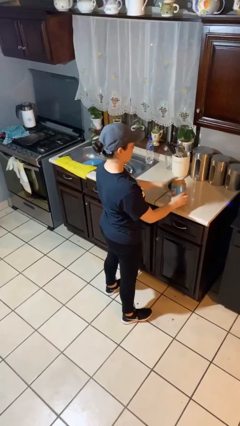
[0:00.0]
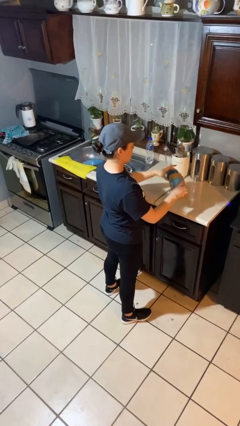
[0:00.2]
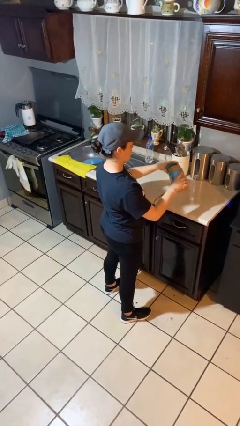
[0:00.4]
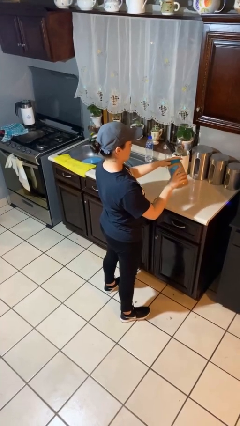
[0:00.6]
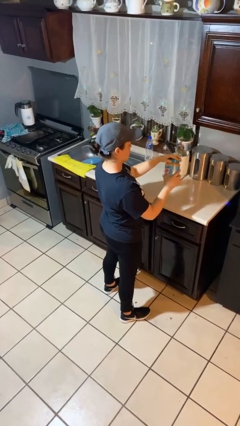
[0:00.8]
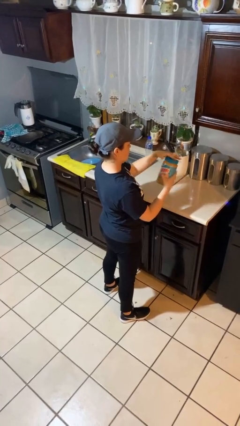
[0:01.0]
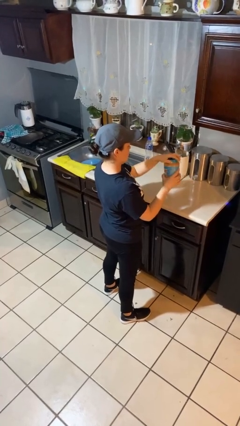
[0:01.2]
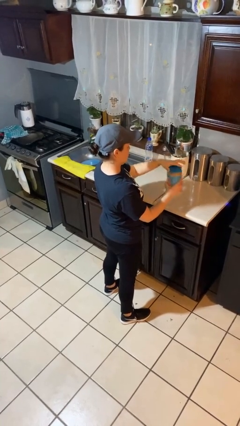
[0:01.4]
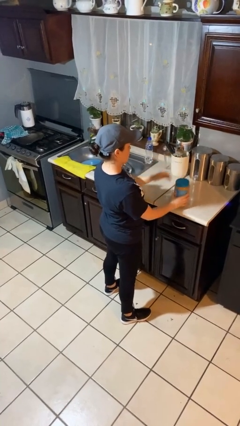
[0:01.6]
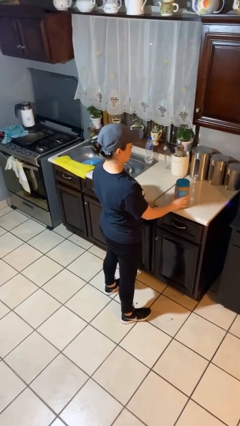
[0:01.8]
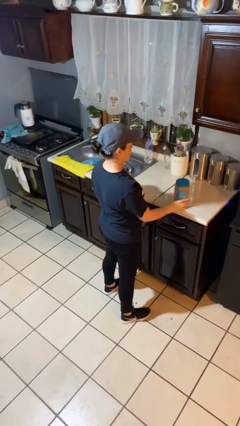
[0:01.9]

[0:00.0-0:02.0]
person closes jar

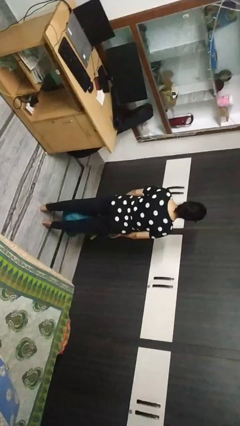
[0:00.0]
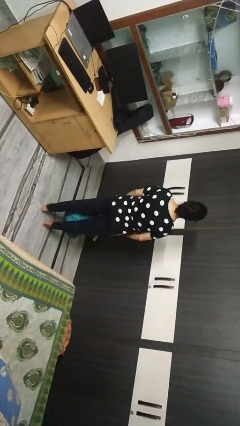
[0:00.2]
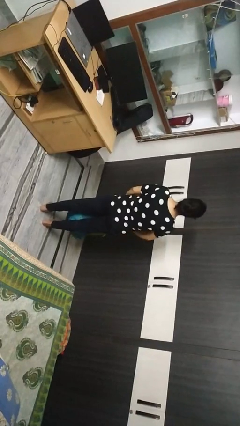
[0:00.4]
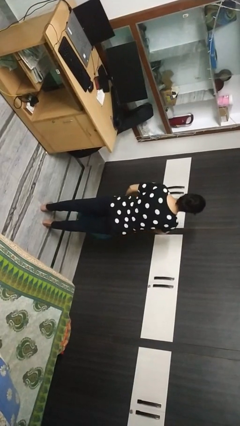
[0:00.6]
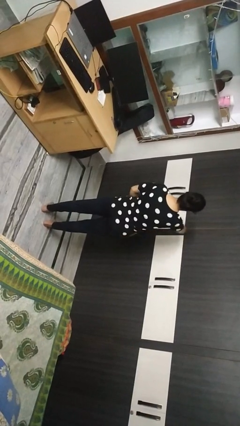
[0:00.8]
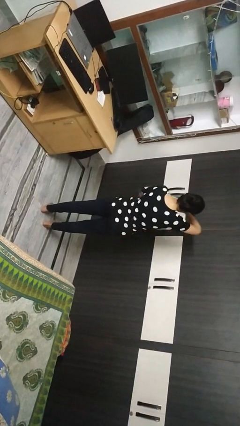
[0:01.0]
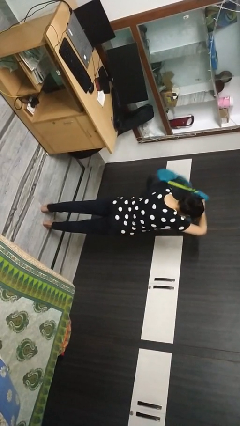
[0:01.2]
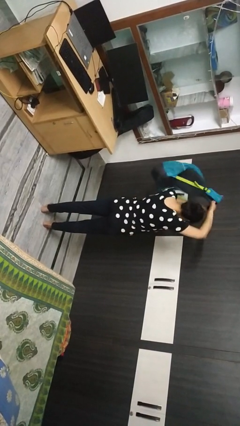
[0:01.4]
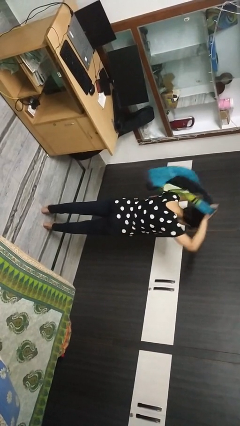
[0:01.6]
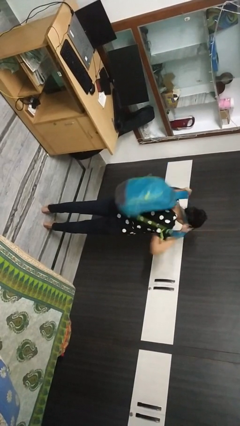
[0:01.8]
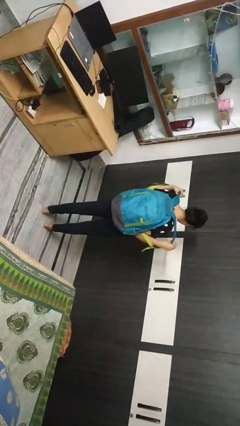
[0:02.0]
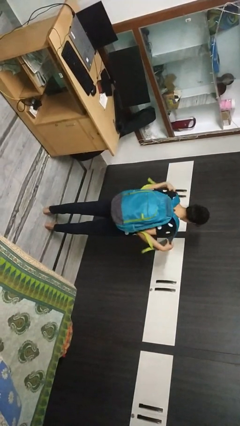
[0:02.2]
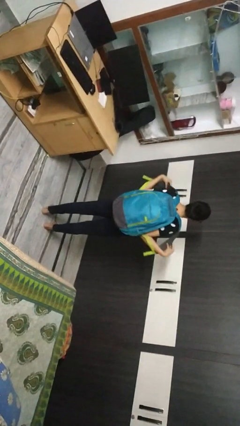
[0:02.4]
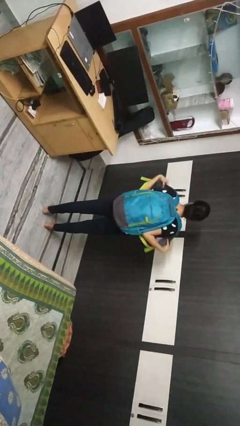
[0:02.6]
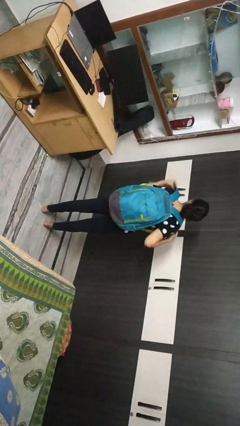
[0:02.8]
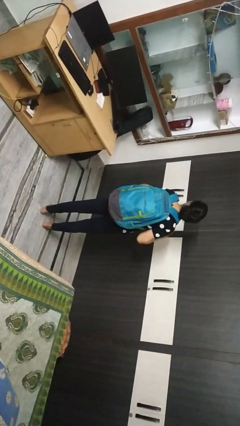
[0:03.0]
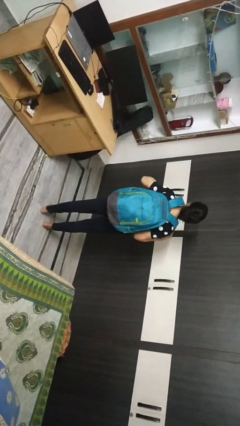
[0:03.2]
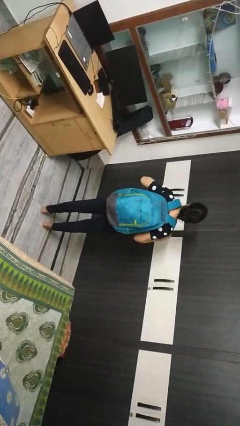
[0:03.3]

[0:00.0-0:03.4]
person puts on backpack

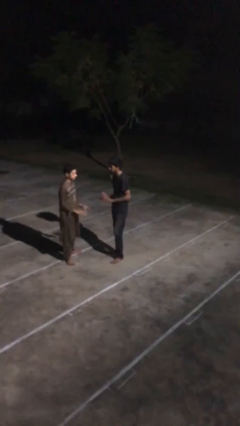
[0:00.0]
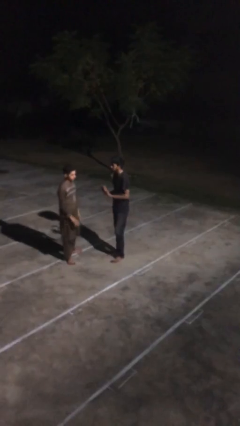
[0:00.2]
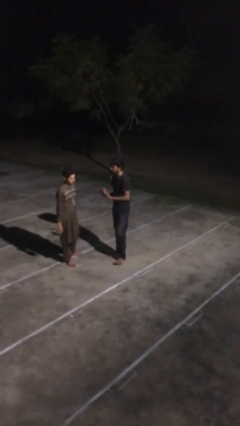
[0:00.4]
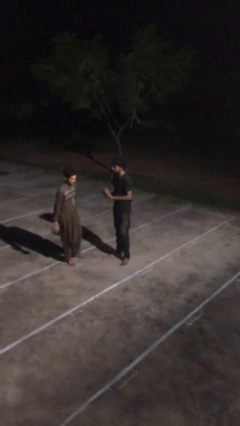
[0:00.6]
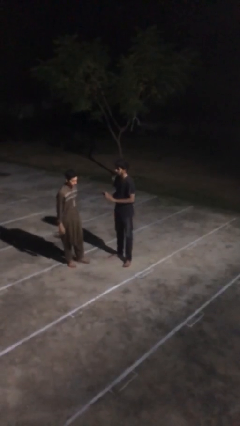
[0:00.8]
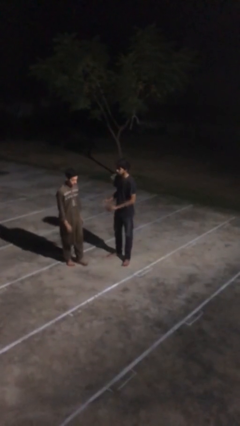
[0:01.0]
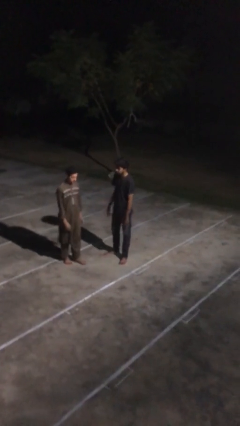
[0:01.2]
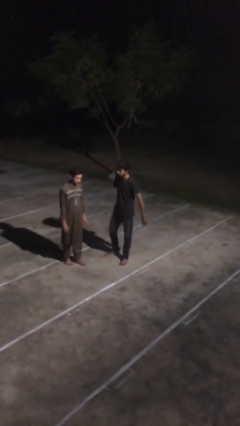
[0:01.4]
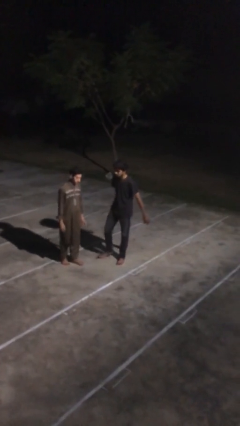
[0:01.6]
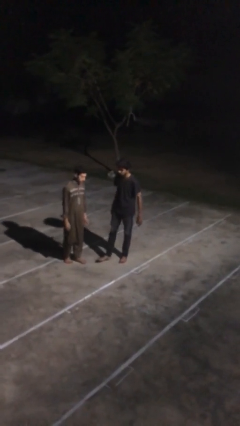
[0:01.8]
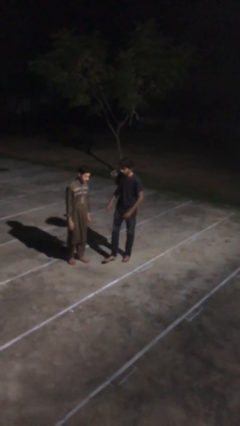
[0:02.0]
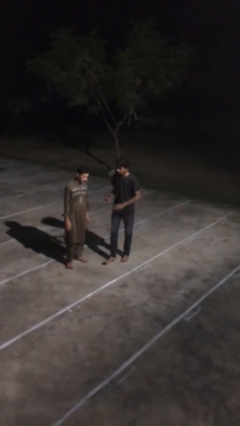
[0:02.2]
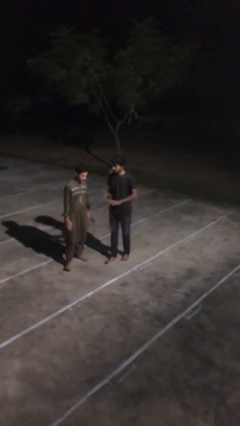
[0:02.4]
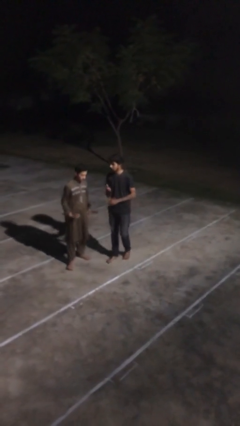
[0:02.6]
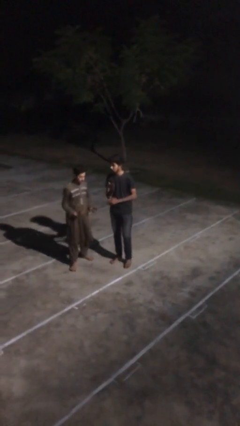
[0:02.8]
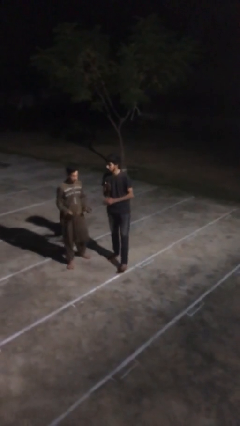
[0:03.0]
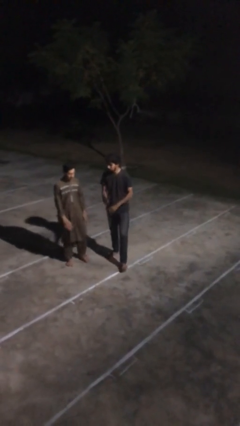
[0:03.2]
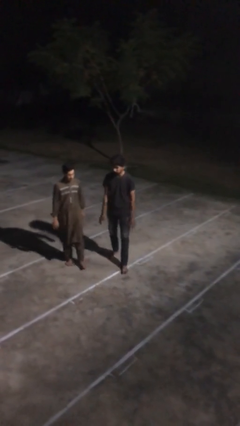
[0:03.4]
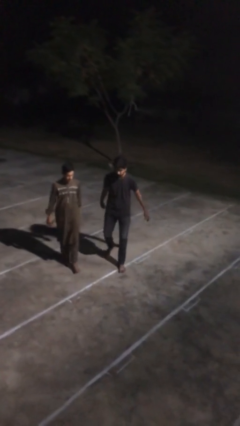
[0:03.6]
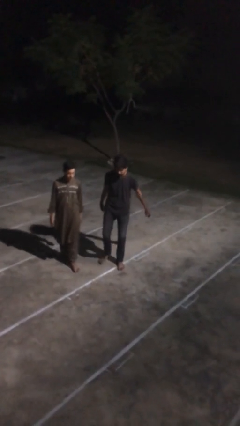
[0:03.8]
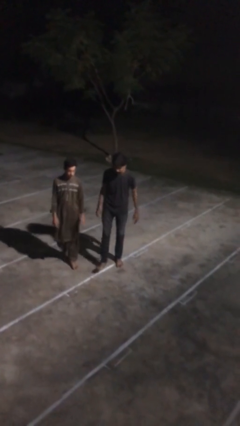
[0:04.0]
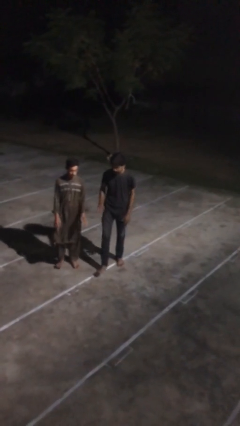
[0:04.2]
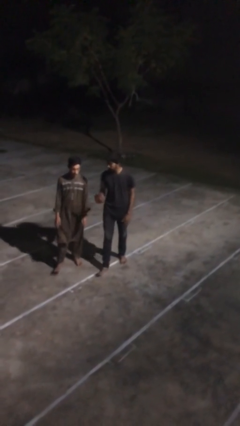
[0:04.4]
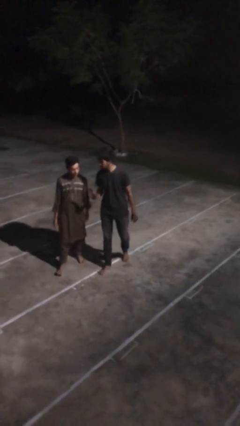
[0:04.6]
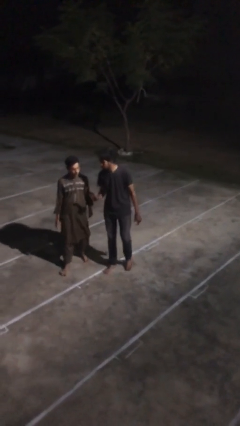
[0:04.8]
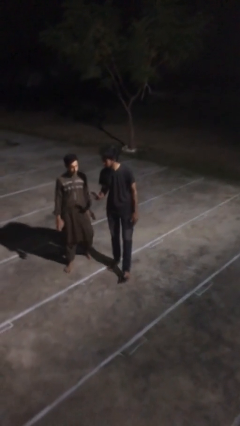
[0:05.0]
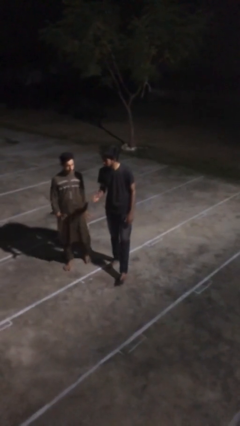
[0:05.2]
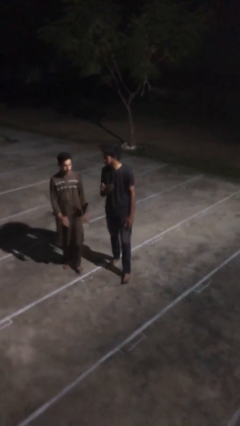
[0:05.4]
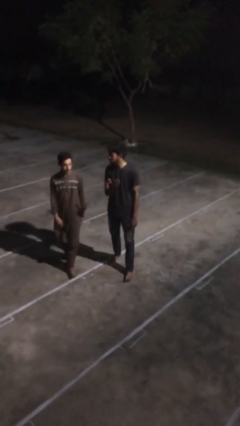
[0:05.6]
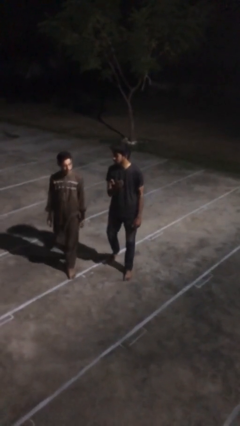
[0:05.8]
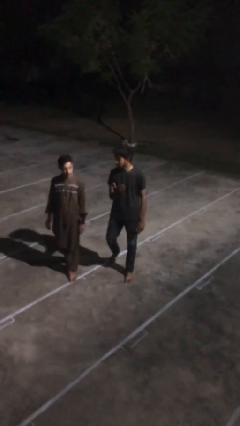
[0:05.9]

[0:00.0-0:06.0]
person talks to person

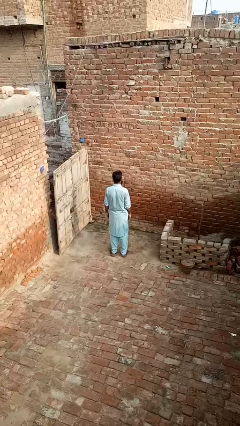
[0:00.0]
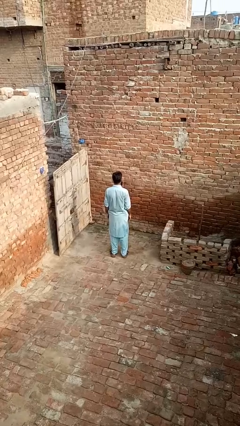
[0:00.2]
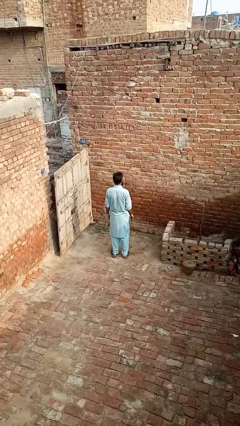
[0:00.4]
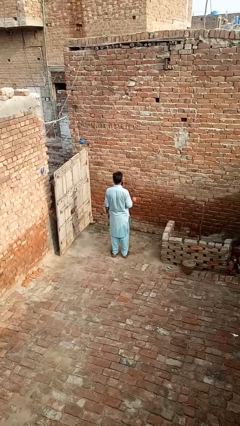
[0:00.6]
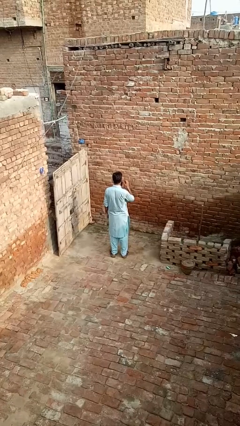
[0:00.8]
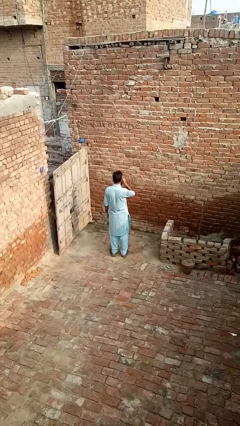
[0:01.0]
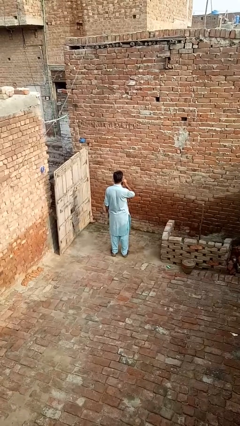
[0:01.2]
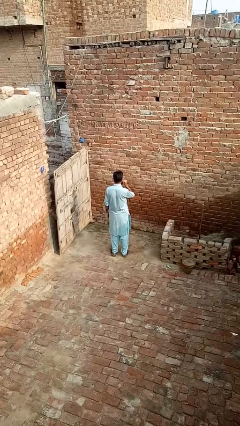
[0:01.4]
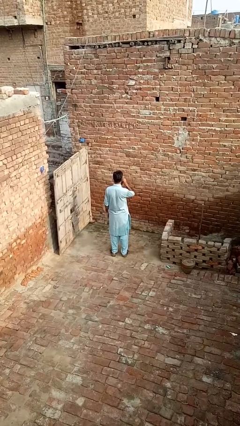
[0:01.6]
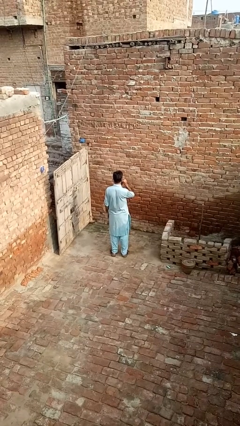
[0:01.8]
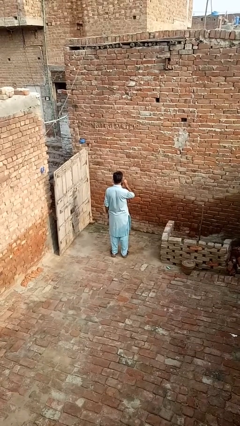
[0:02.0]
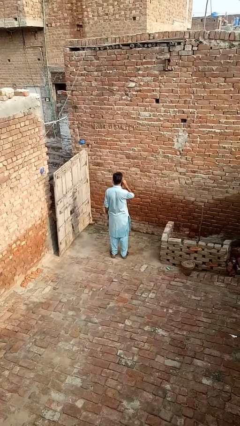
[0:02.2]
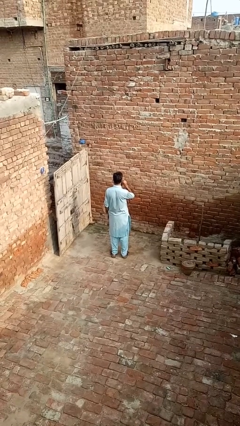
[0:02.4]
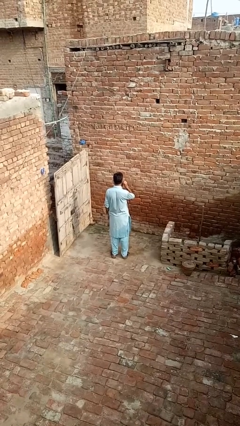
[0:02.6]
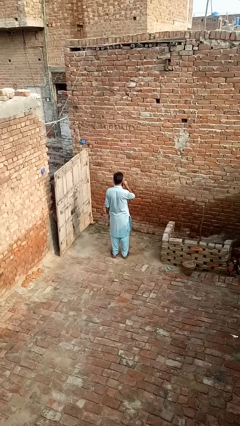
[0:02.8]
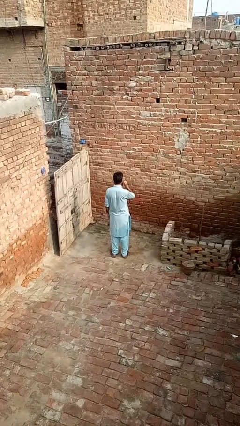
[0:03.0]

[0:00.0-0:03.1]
person touches earlobe

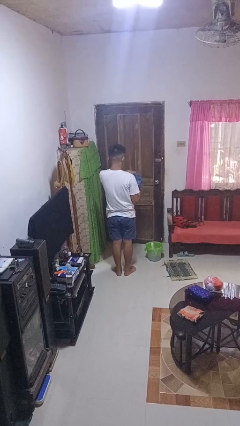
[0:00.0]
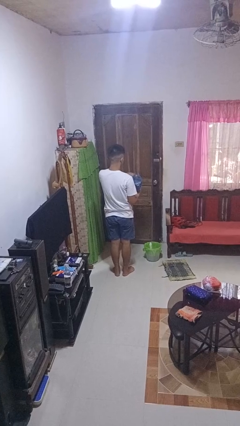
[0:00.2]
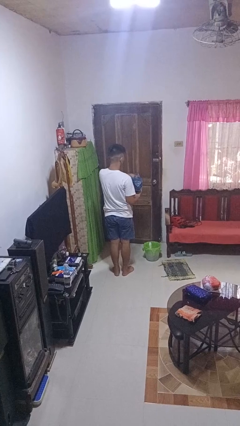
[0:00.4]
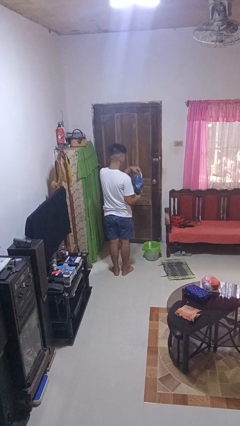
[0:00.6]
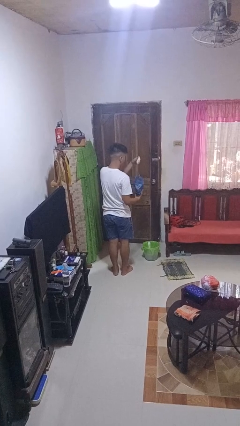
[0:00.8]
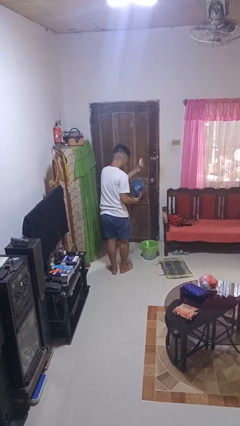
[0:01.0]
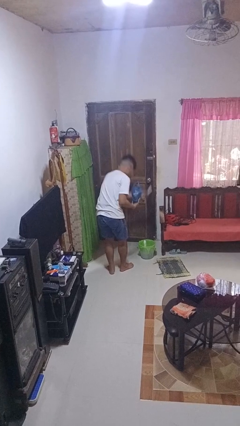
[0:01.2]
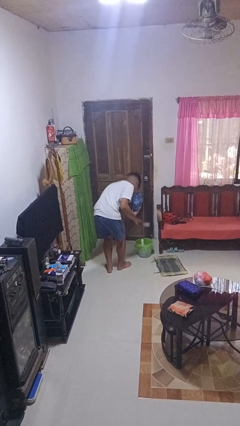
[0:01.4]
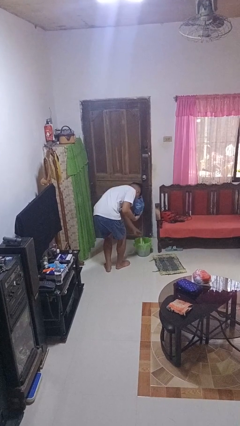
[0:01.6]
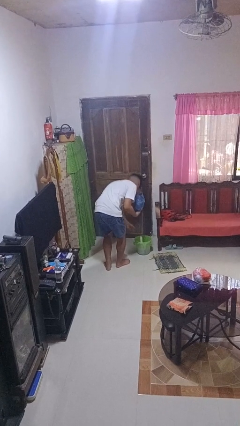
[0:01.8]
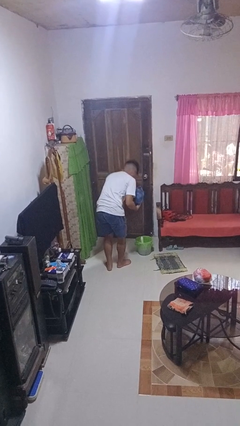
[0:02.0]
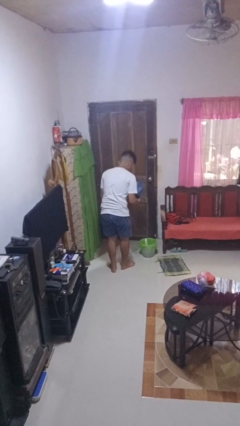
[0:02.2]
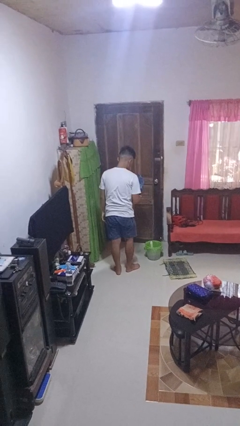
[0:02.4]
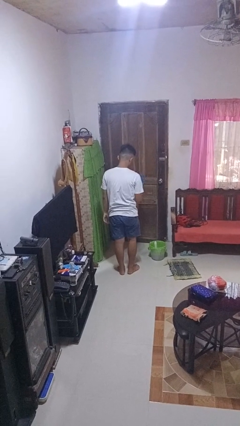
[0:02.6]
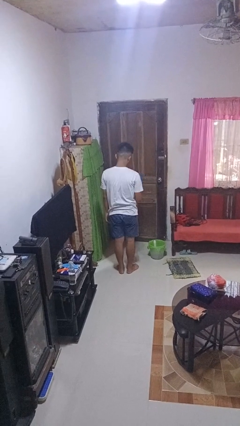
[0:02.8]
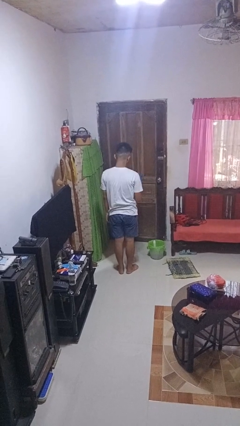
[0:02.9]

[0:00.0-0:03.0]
person discards trash
